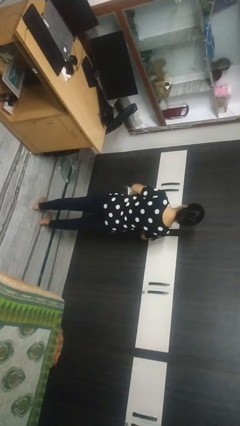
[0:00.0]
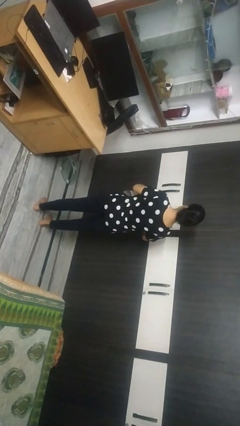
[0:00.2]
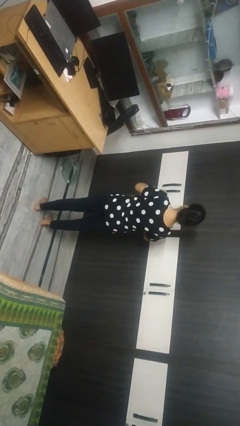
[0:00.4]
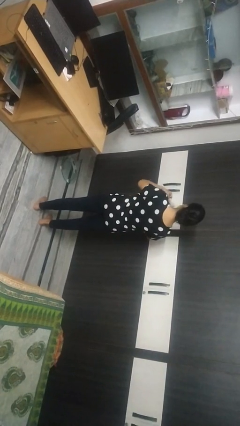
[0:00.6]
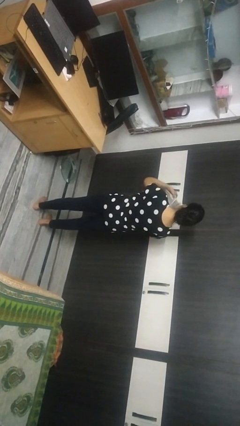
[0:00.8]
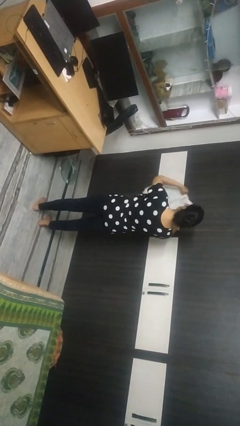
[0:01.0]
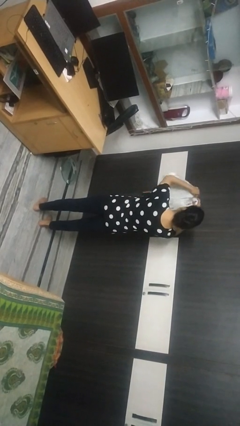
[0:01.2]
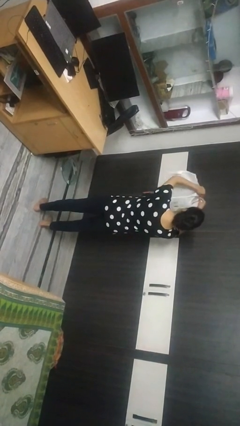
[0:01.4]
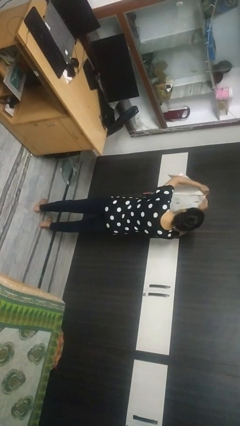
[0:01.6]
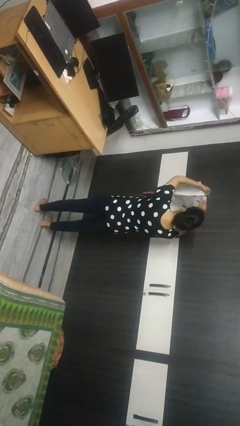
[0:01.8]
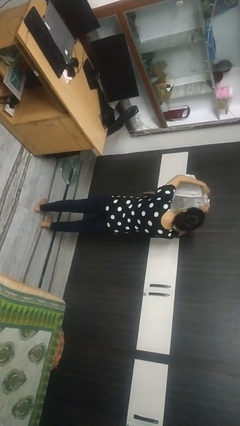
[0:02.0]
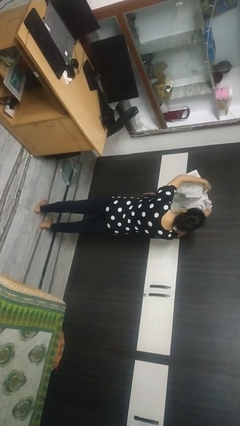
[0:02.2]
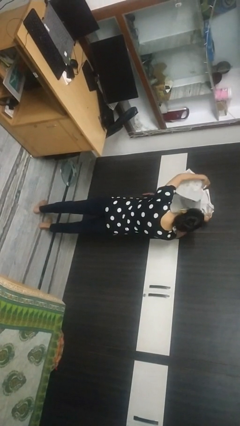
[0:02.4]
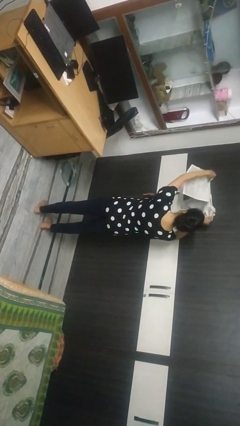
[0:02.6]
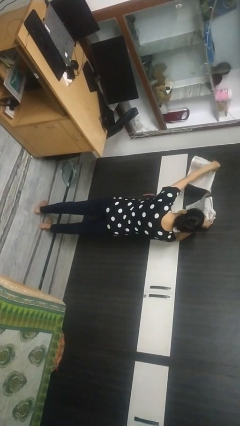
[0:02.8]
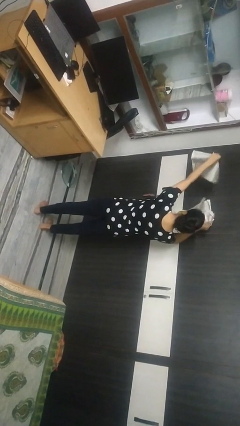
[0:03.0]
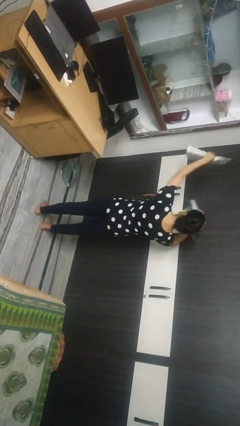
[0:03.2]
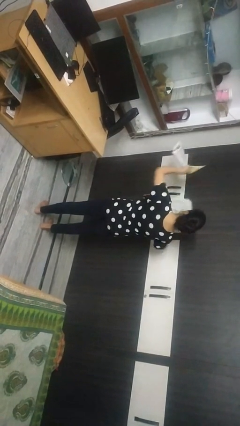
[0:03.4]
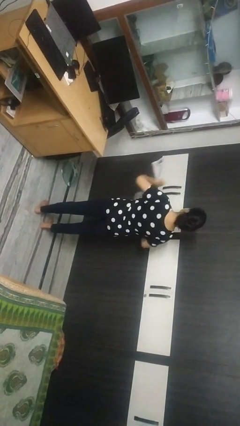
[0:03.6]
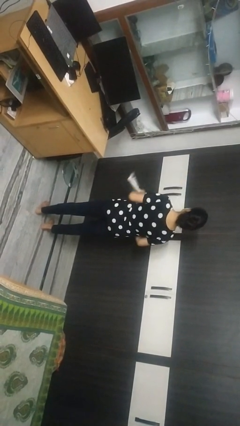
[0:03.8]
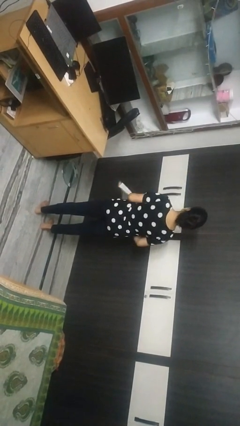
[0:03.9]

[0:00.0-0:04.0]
person tears paper

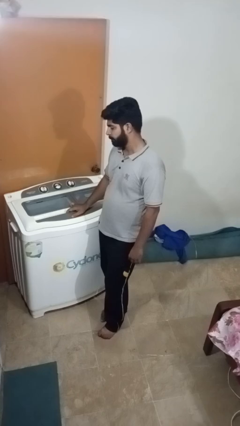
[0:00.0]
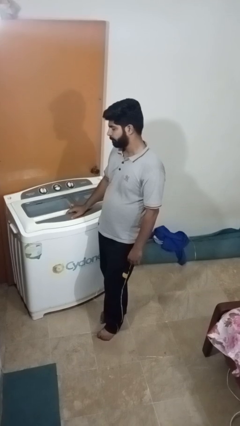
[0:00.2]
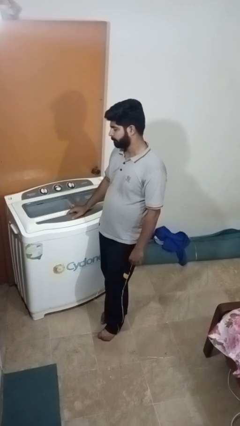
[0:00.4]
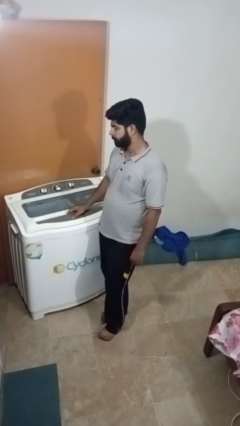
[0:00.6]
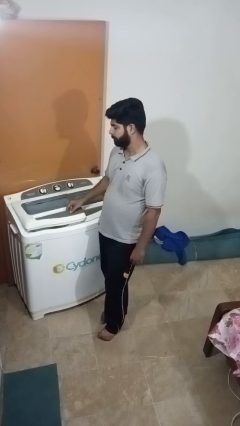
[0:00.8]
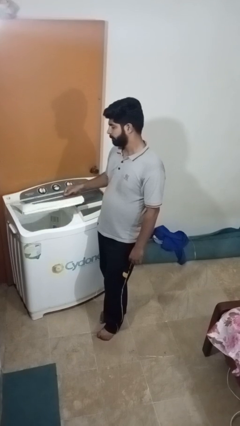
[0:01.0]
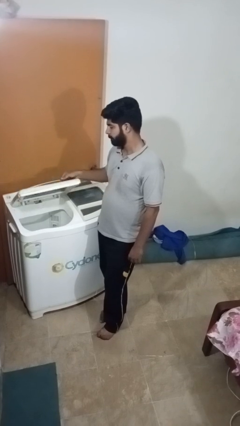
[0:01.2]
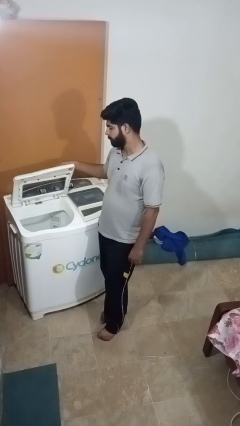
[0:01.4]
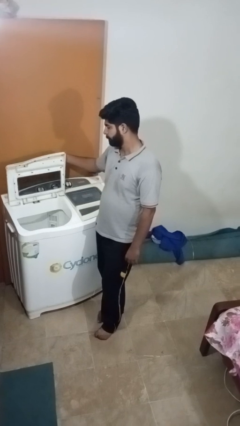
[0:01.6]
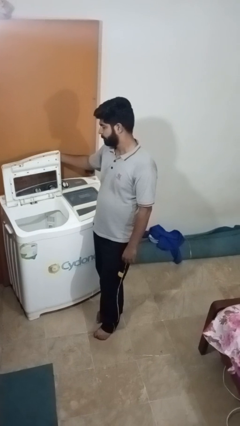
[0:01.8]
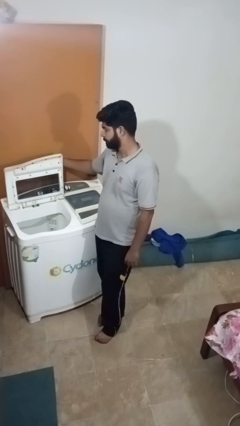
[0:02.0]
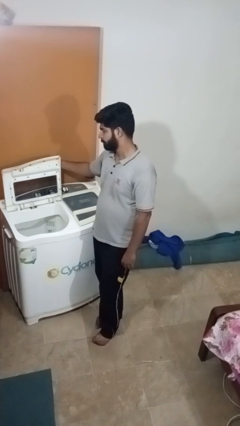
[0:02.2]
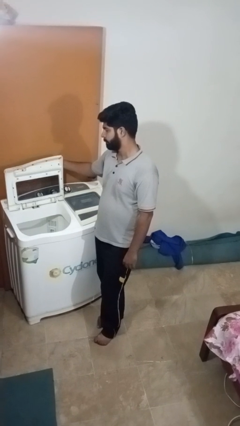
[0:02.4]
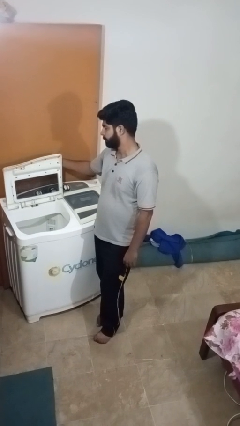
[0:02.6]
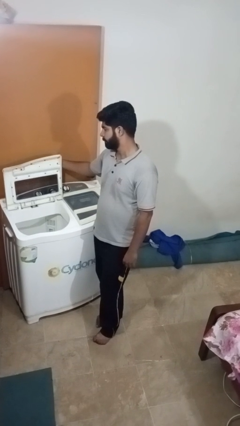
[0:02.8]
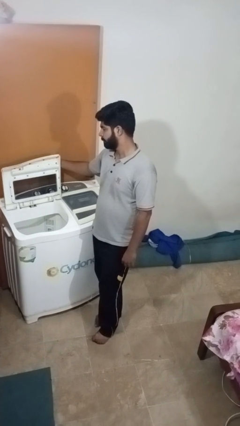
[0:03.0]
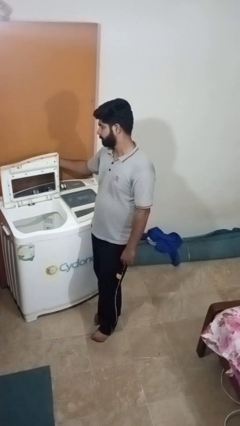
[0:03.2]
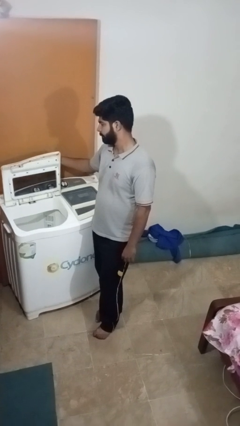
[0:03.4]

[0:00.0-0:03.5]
person opens clothes washer

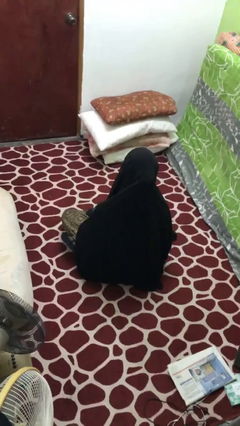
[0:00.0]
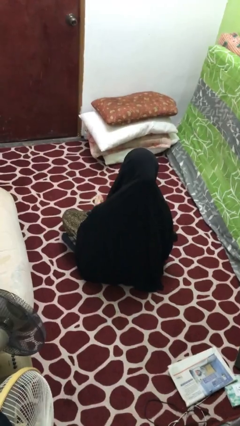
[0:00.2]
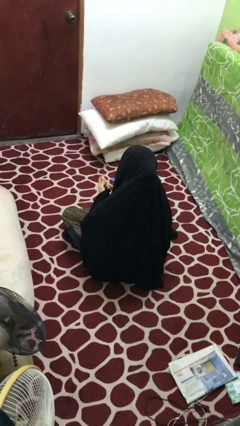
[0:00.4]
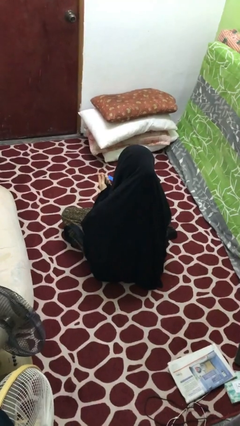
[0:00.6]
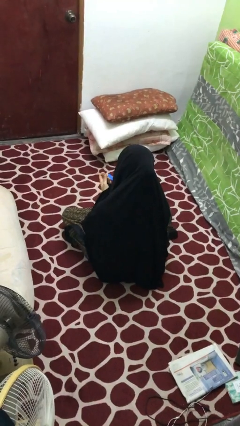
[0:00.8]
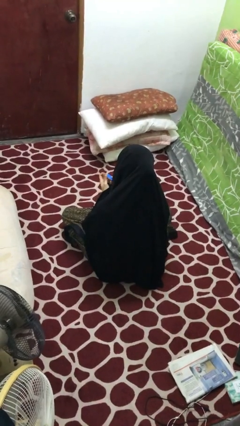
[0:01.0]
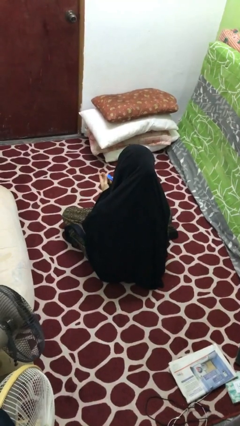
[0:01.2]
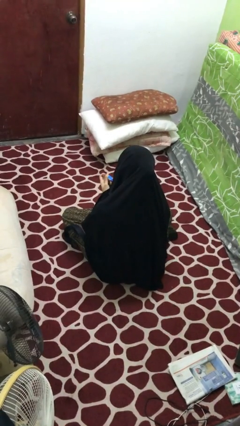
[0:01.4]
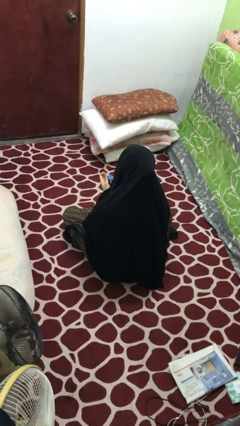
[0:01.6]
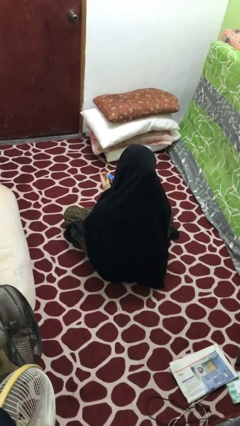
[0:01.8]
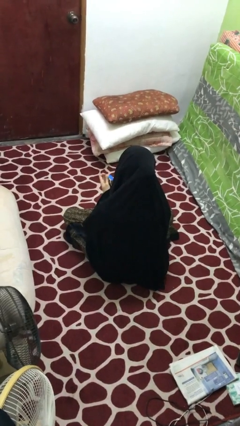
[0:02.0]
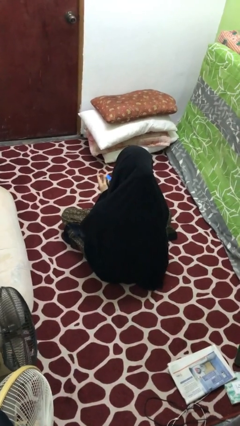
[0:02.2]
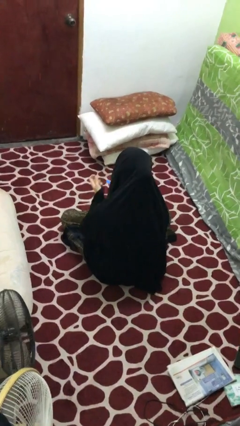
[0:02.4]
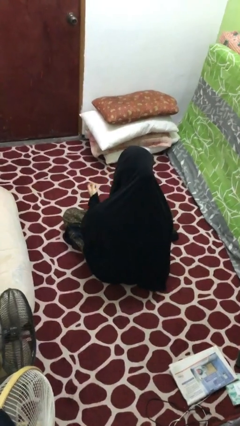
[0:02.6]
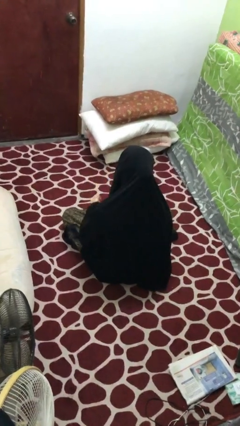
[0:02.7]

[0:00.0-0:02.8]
person files fingernails

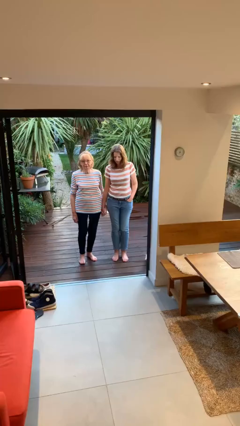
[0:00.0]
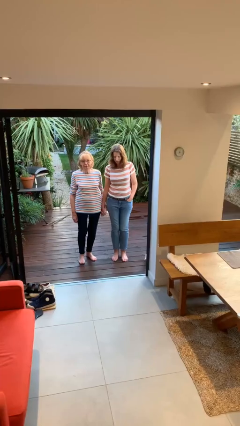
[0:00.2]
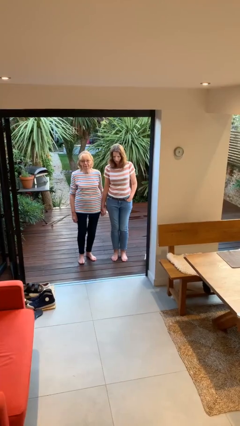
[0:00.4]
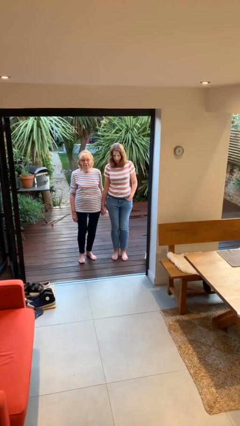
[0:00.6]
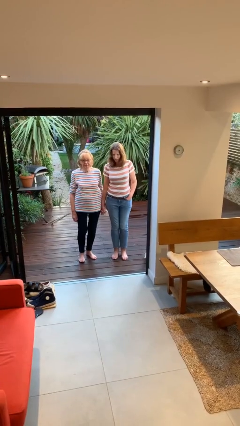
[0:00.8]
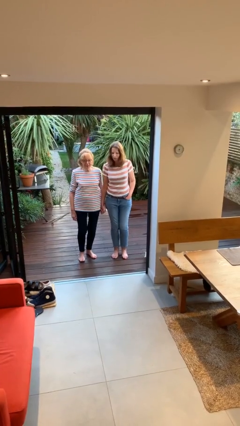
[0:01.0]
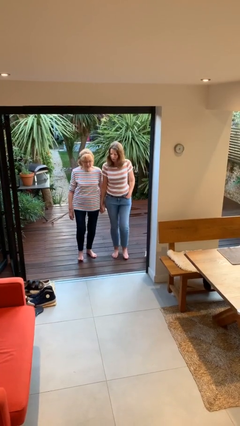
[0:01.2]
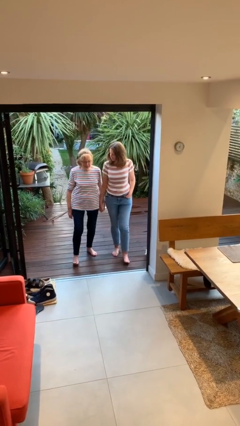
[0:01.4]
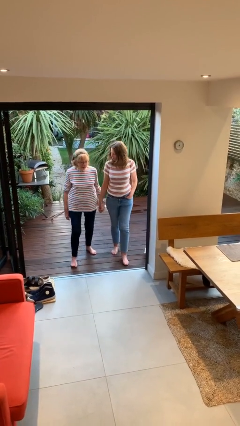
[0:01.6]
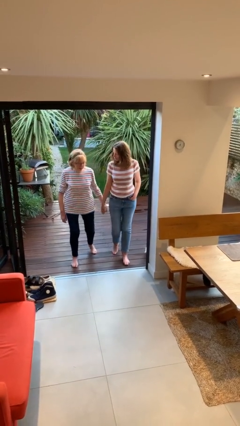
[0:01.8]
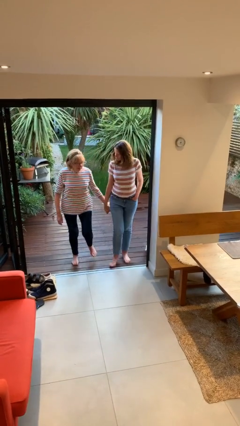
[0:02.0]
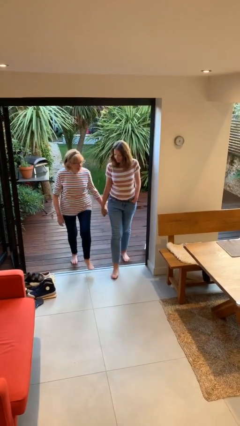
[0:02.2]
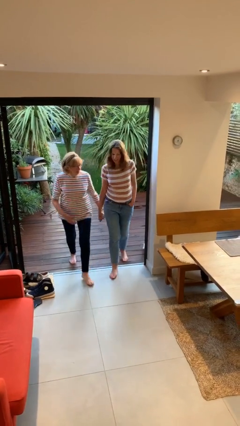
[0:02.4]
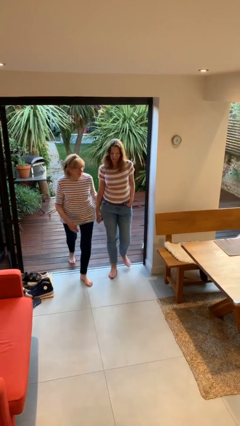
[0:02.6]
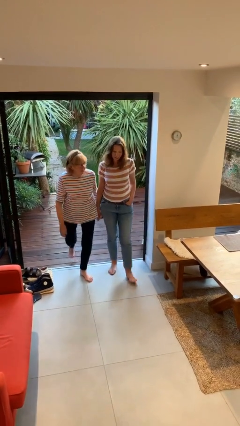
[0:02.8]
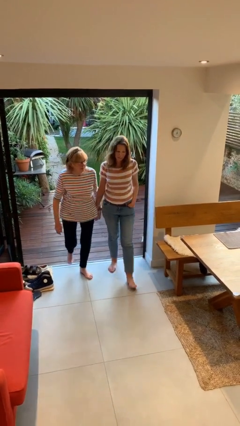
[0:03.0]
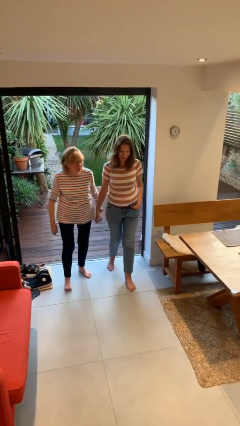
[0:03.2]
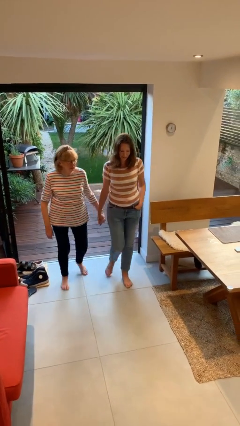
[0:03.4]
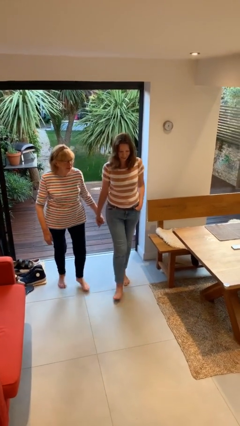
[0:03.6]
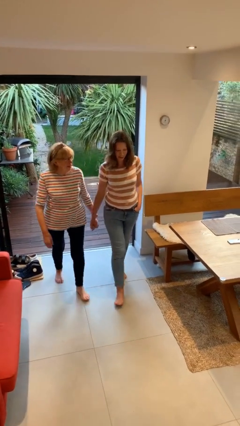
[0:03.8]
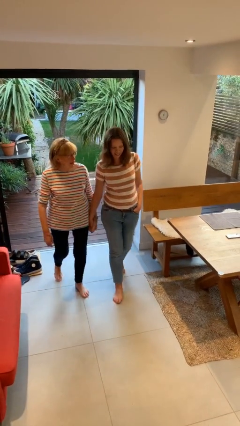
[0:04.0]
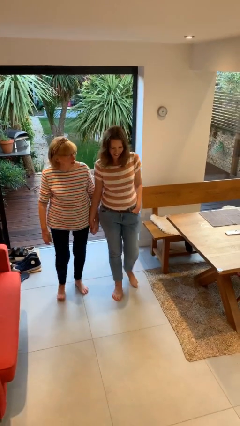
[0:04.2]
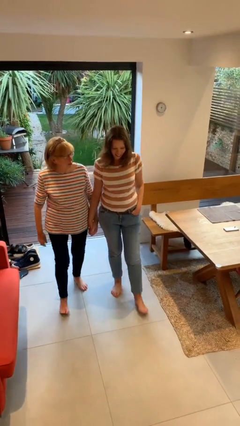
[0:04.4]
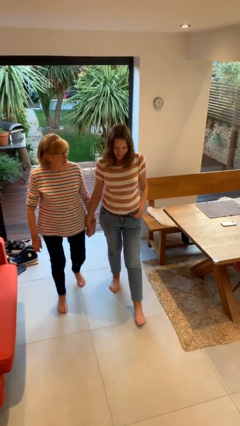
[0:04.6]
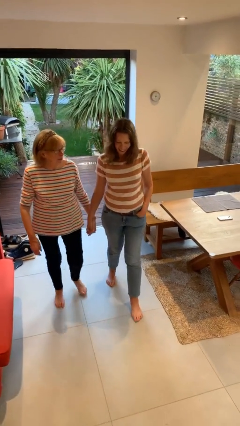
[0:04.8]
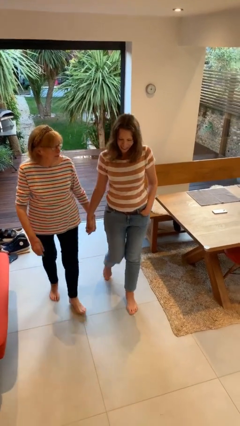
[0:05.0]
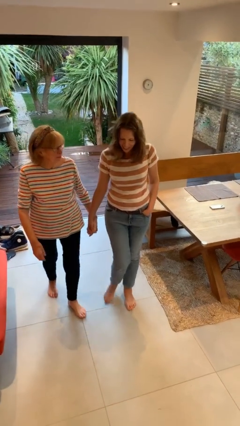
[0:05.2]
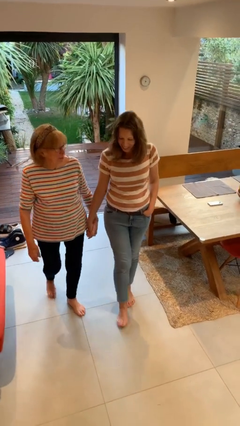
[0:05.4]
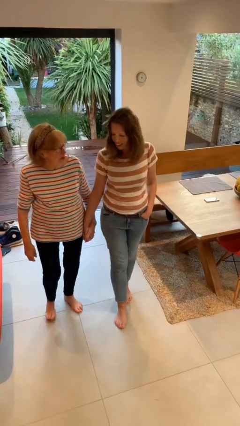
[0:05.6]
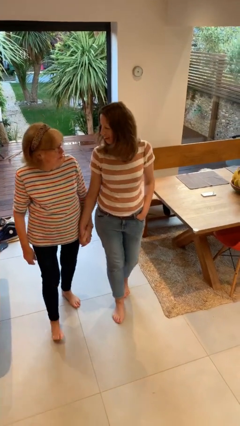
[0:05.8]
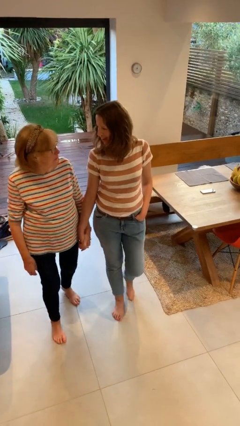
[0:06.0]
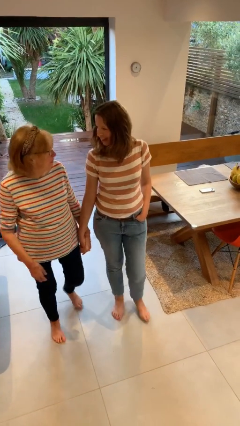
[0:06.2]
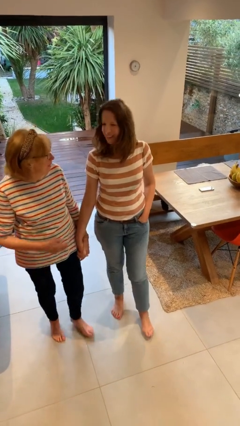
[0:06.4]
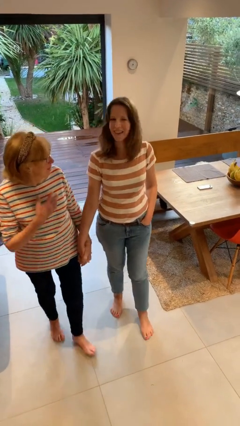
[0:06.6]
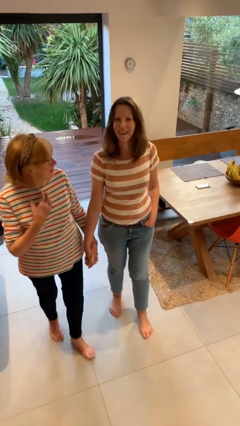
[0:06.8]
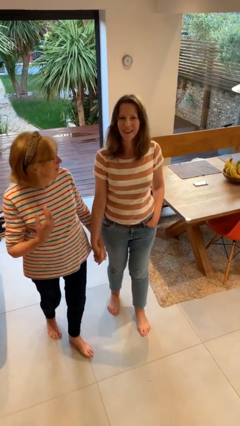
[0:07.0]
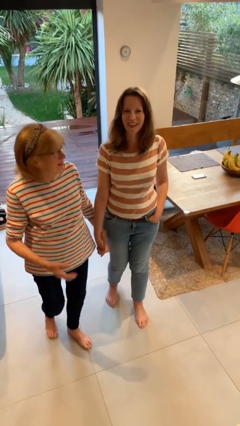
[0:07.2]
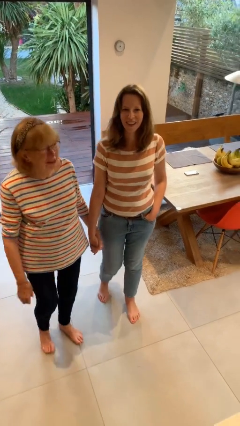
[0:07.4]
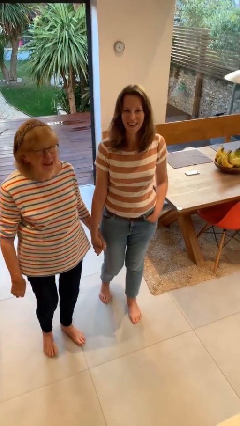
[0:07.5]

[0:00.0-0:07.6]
person holds hand
